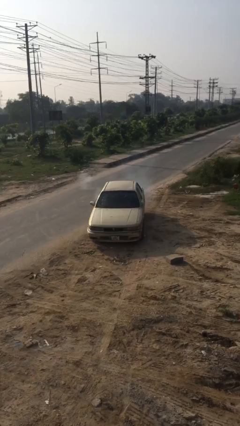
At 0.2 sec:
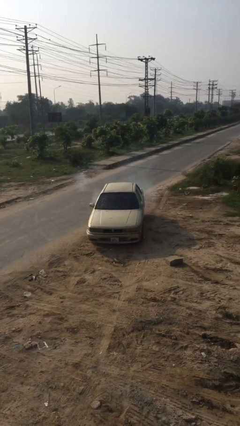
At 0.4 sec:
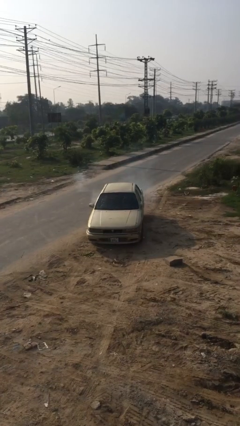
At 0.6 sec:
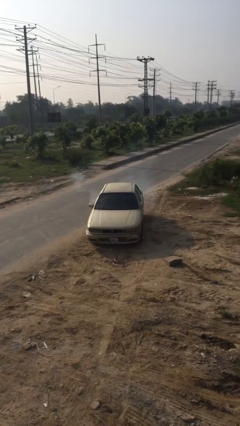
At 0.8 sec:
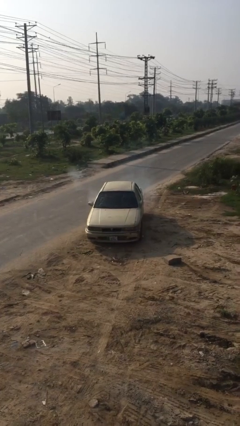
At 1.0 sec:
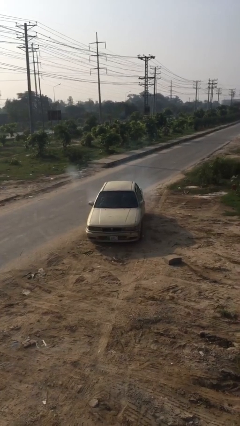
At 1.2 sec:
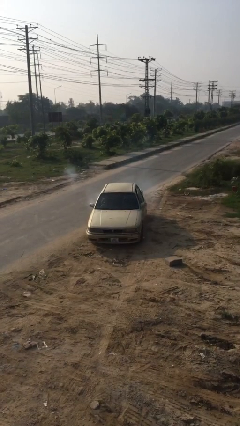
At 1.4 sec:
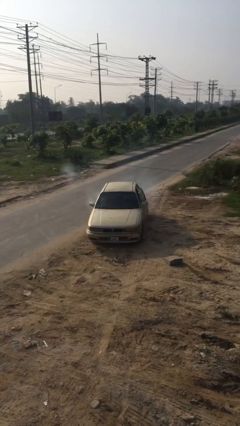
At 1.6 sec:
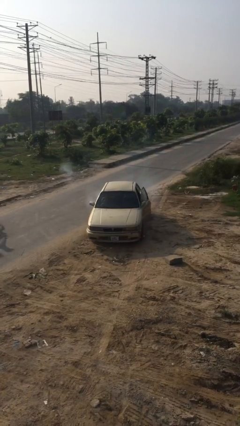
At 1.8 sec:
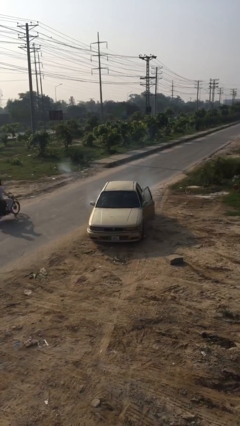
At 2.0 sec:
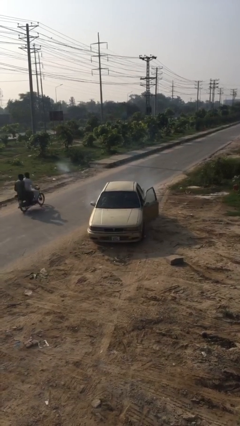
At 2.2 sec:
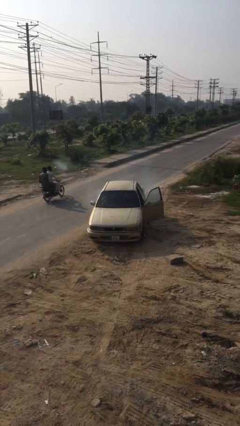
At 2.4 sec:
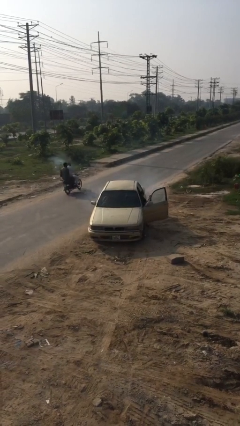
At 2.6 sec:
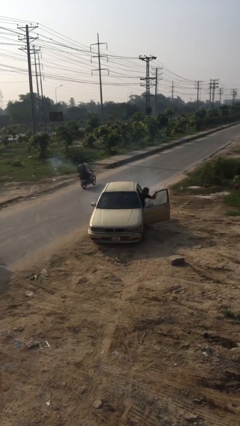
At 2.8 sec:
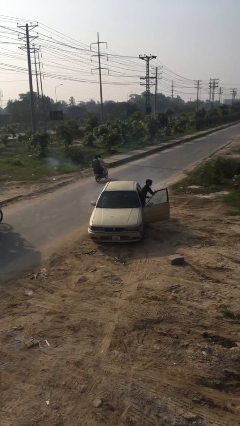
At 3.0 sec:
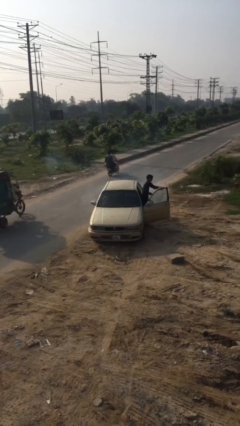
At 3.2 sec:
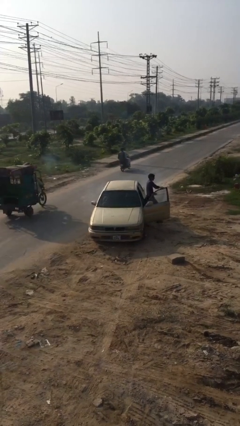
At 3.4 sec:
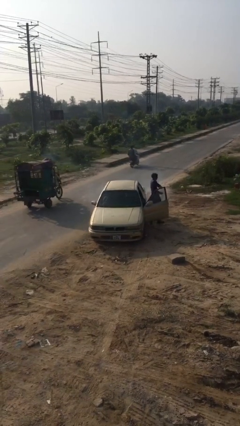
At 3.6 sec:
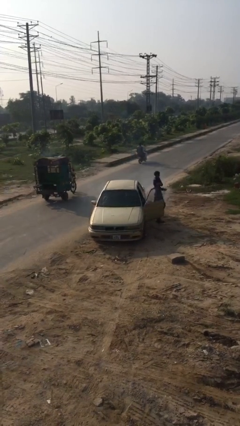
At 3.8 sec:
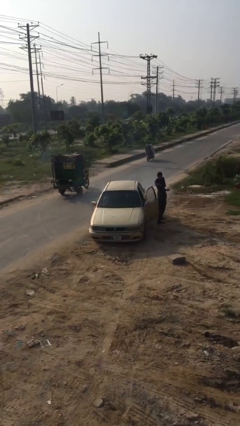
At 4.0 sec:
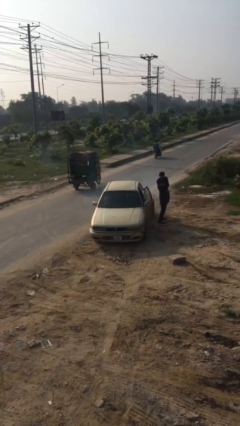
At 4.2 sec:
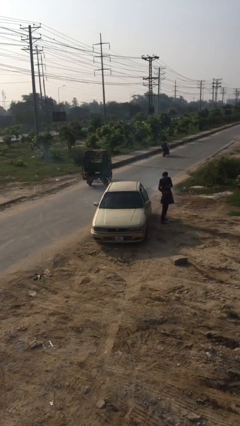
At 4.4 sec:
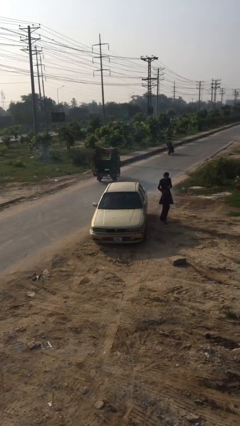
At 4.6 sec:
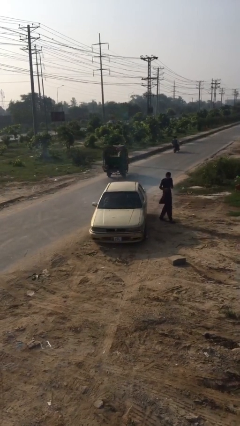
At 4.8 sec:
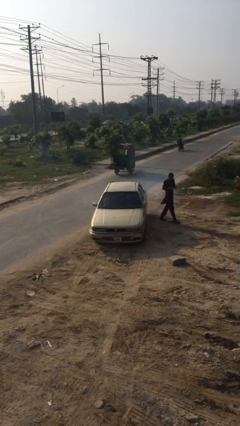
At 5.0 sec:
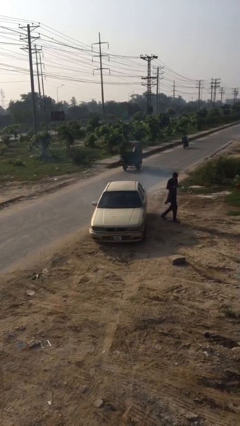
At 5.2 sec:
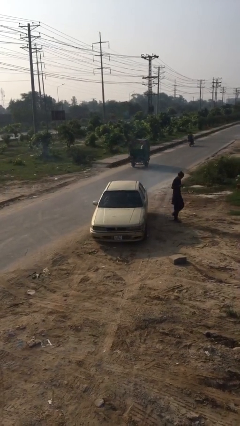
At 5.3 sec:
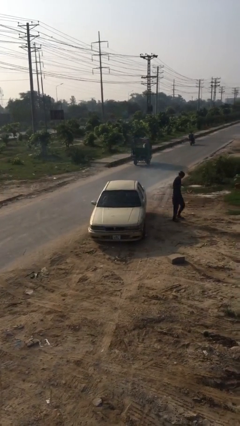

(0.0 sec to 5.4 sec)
car drops off person

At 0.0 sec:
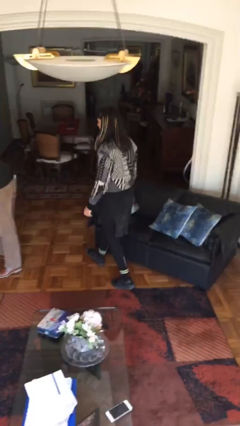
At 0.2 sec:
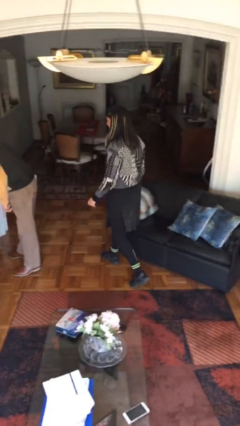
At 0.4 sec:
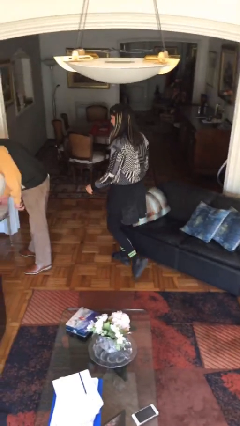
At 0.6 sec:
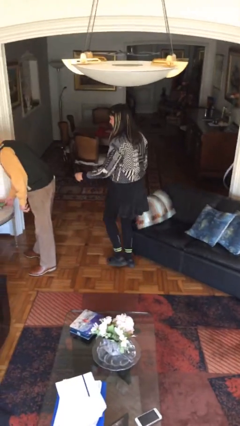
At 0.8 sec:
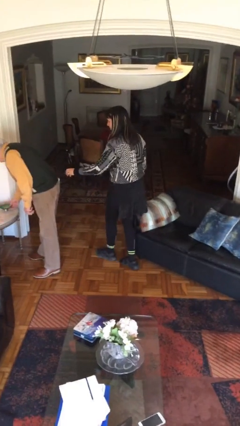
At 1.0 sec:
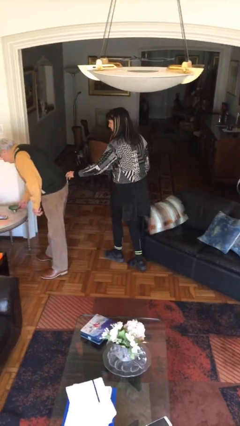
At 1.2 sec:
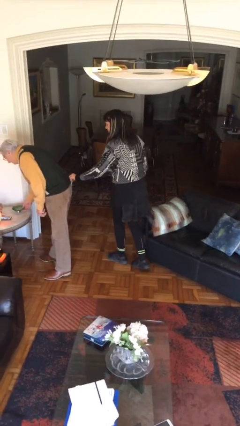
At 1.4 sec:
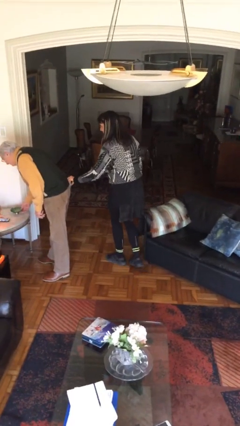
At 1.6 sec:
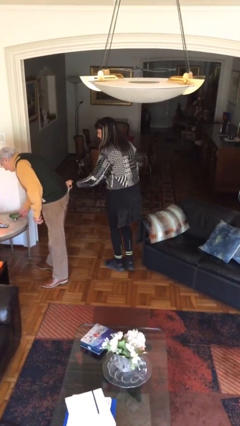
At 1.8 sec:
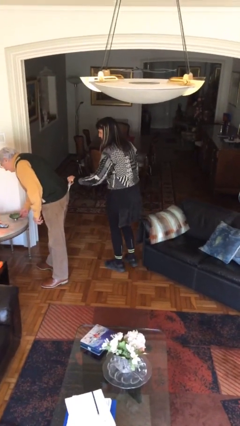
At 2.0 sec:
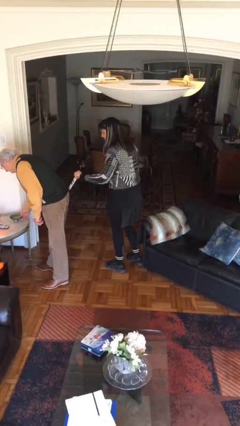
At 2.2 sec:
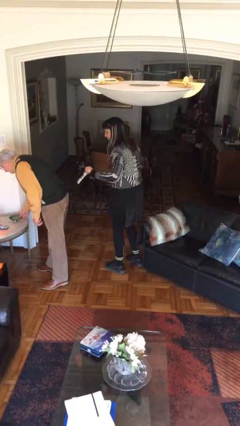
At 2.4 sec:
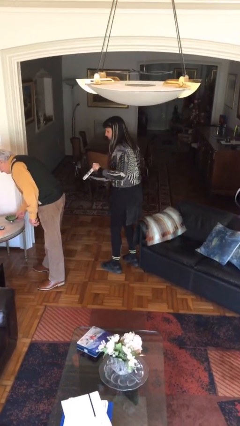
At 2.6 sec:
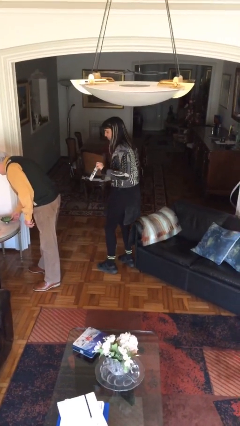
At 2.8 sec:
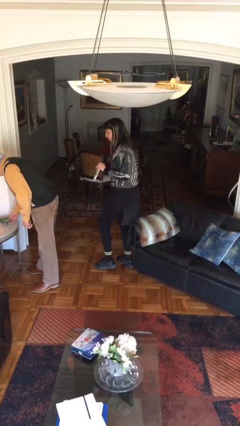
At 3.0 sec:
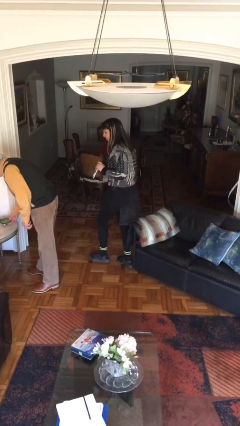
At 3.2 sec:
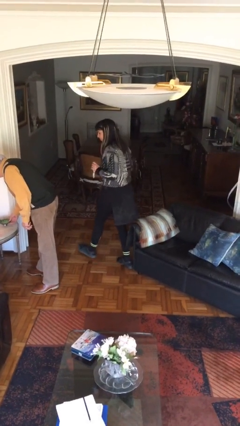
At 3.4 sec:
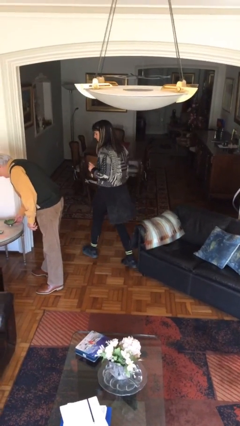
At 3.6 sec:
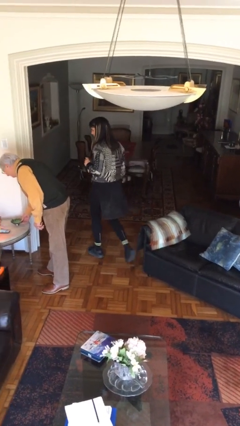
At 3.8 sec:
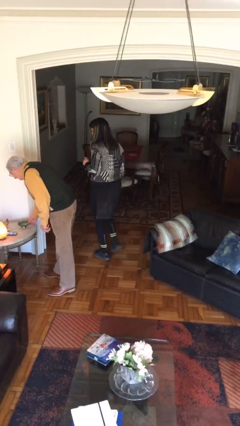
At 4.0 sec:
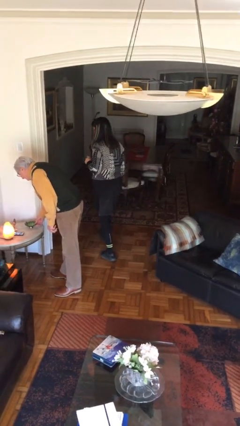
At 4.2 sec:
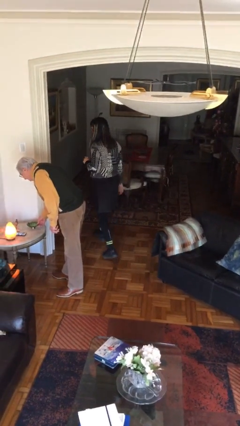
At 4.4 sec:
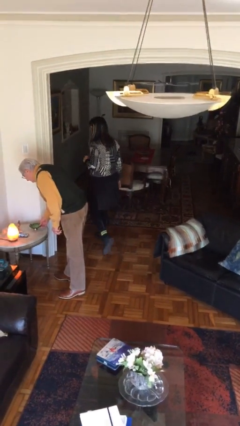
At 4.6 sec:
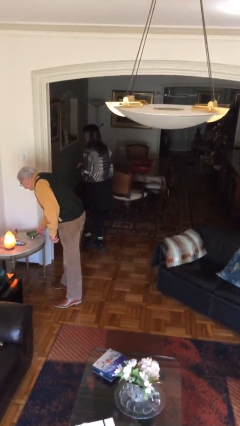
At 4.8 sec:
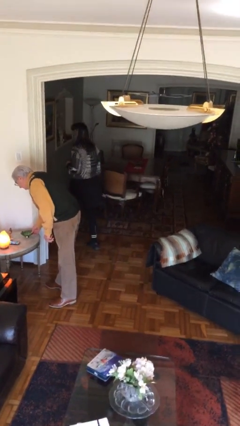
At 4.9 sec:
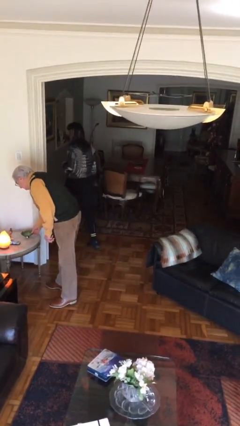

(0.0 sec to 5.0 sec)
person steals object from person

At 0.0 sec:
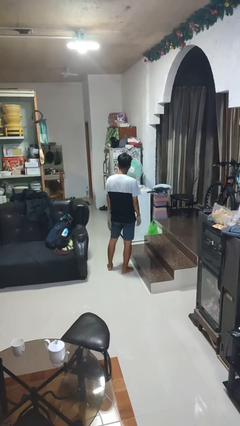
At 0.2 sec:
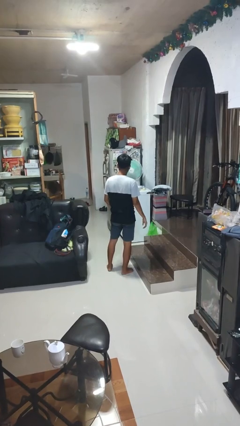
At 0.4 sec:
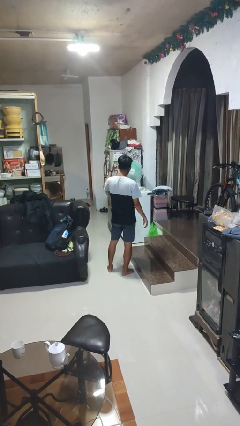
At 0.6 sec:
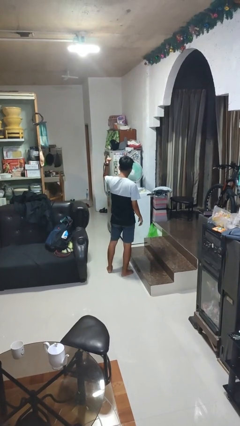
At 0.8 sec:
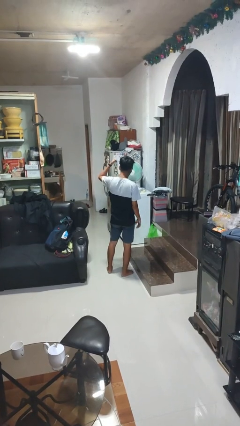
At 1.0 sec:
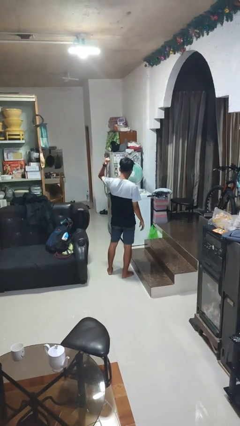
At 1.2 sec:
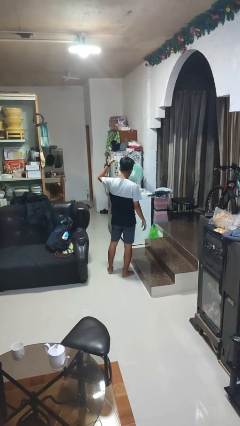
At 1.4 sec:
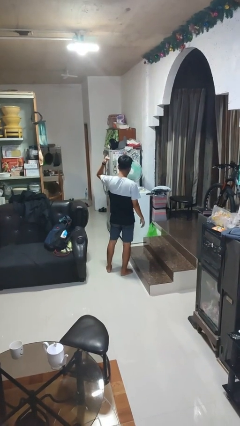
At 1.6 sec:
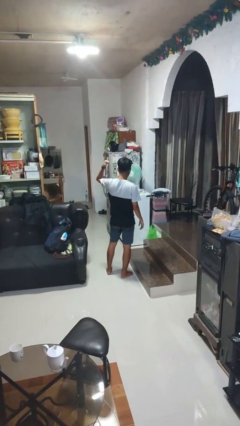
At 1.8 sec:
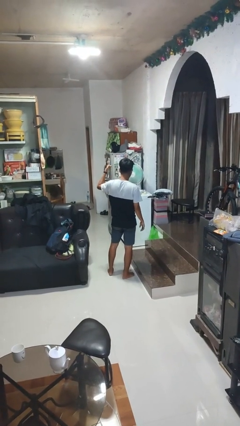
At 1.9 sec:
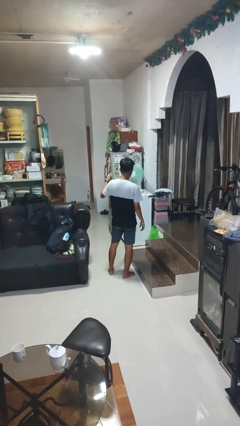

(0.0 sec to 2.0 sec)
person gestures behind me

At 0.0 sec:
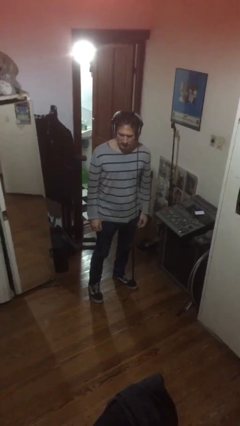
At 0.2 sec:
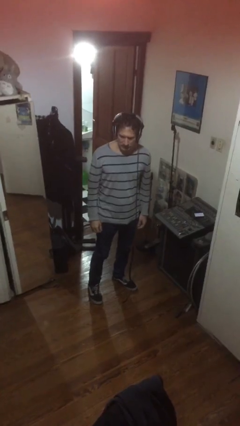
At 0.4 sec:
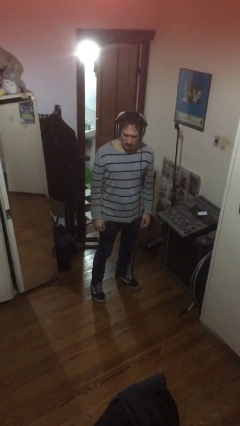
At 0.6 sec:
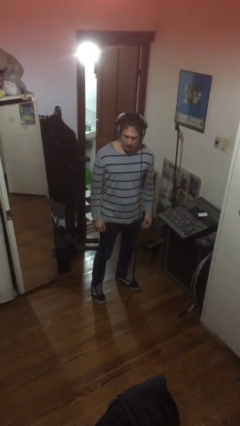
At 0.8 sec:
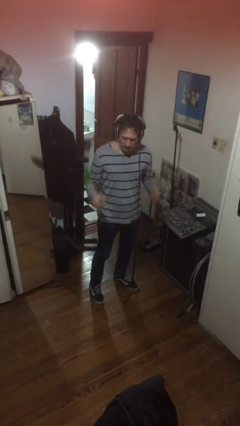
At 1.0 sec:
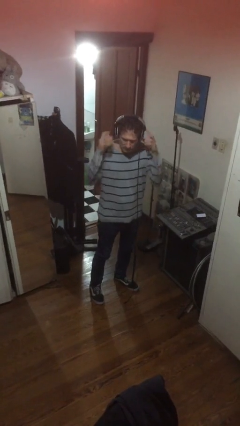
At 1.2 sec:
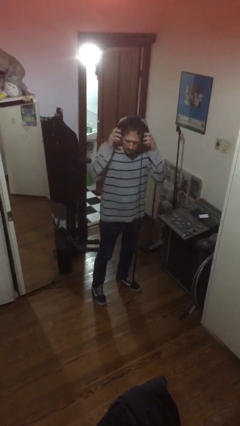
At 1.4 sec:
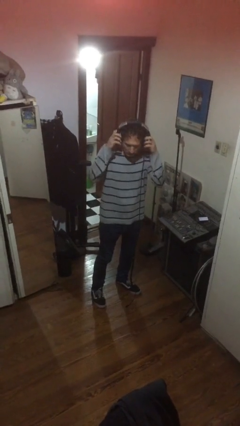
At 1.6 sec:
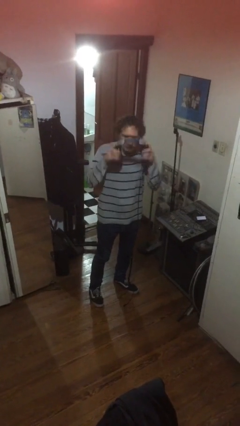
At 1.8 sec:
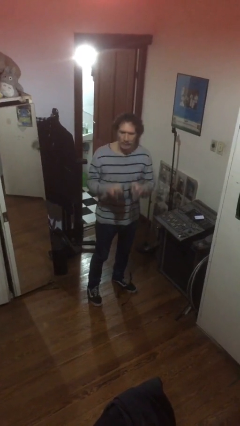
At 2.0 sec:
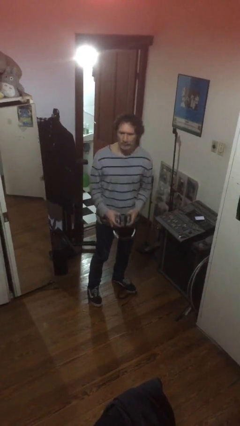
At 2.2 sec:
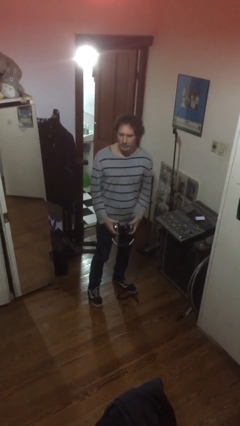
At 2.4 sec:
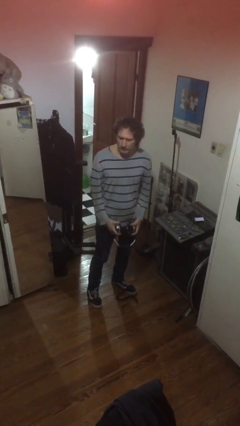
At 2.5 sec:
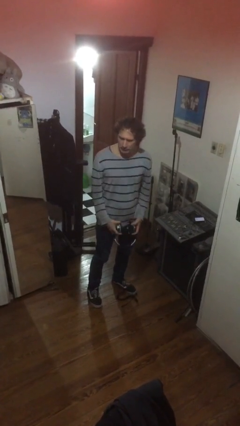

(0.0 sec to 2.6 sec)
person takes off headphones

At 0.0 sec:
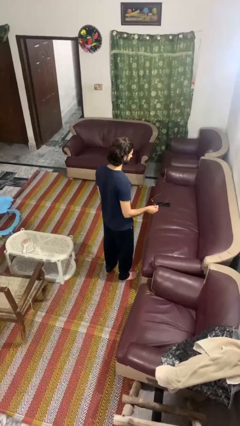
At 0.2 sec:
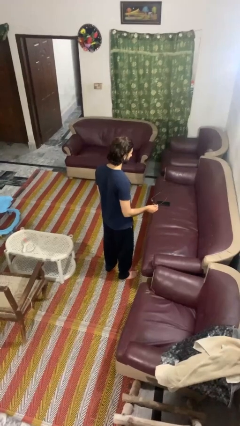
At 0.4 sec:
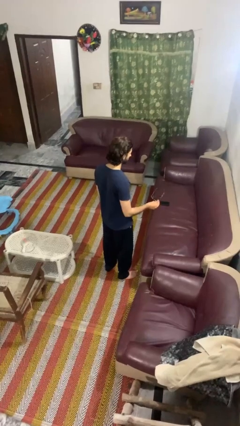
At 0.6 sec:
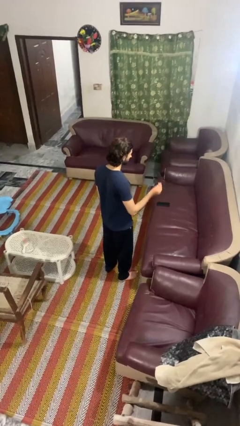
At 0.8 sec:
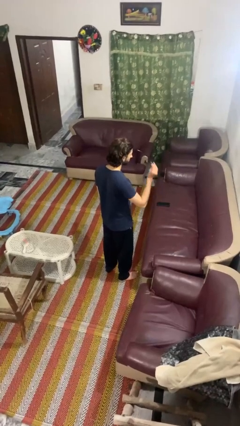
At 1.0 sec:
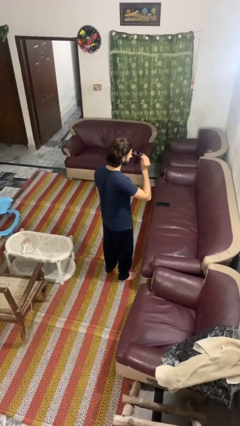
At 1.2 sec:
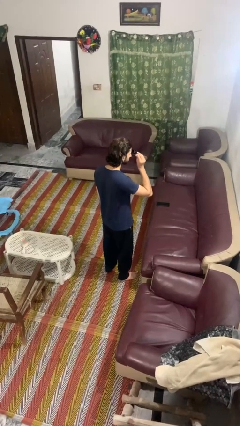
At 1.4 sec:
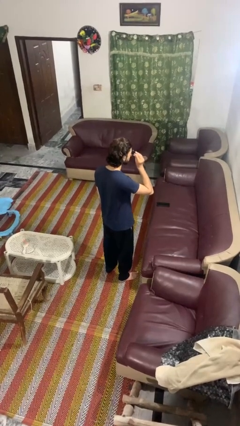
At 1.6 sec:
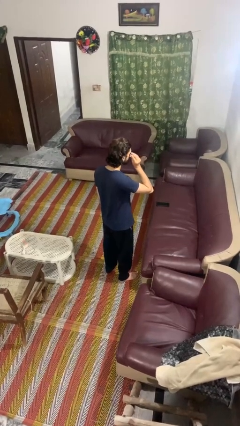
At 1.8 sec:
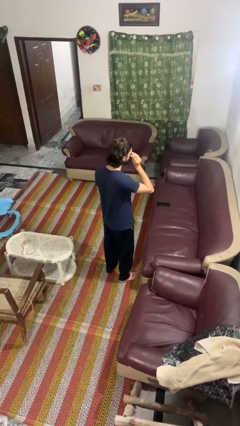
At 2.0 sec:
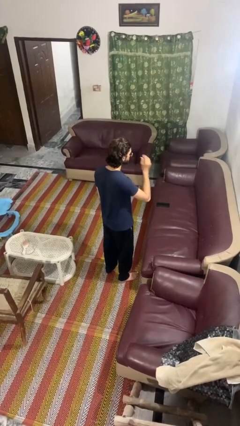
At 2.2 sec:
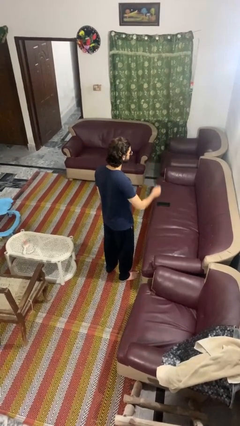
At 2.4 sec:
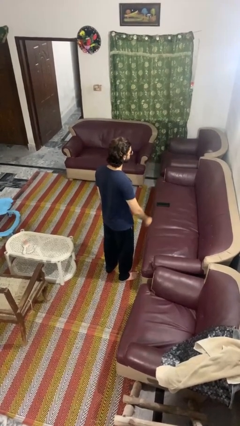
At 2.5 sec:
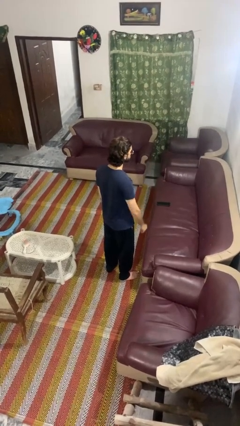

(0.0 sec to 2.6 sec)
person puts on sunglasses
